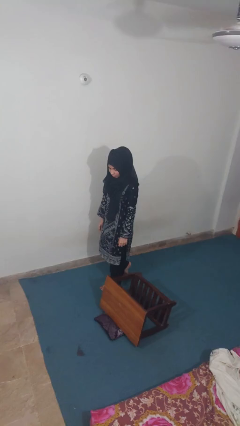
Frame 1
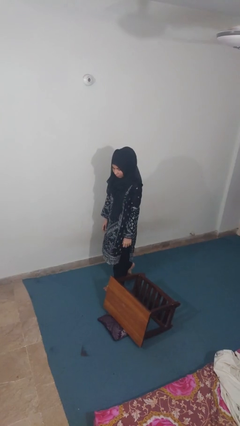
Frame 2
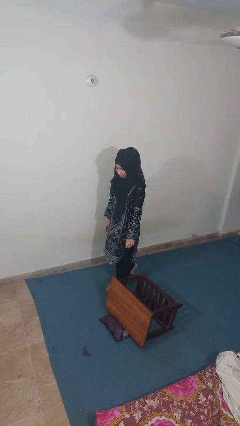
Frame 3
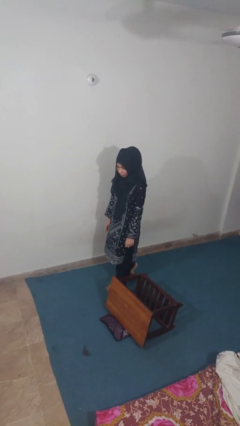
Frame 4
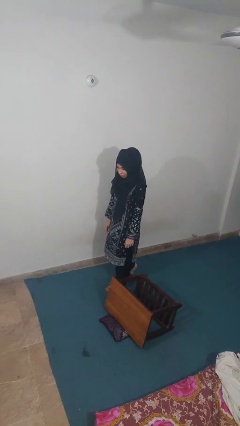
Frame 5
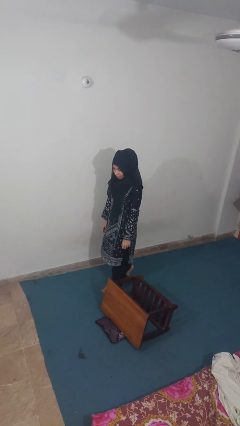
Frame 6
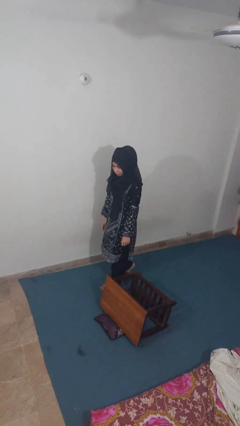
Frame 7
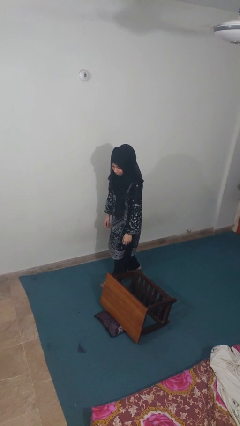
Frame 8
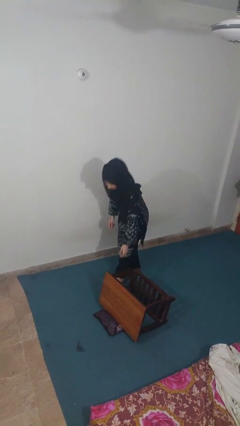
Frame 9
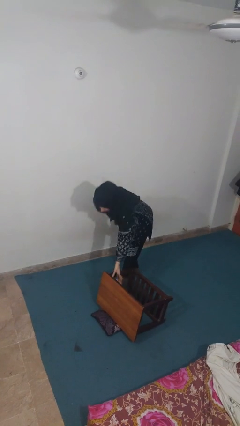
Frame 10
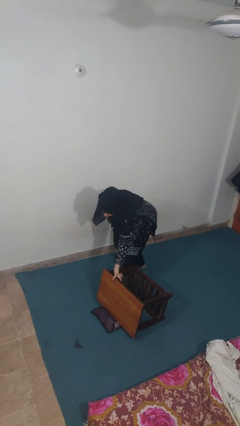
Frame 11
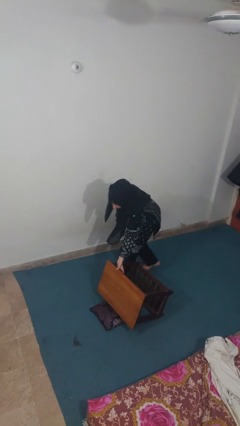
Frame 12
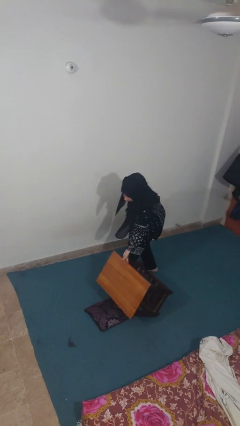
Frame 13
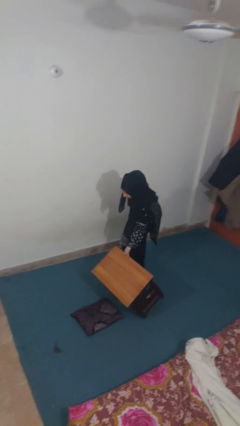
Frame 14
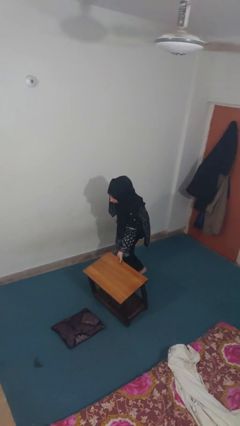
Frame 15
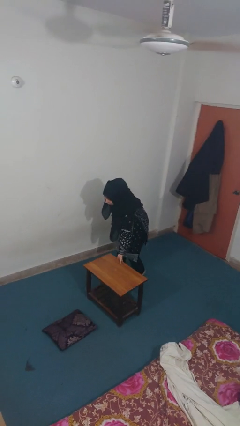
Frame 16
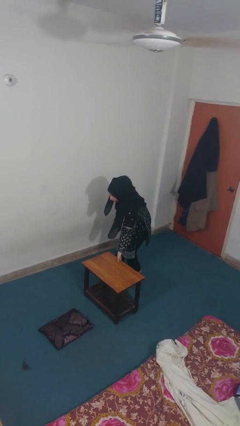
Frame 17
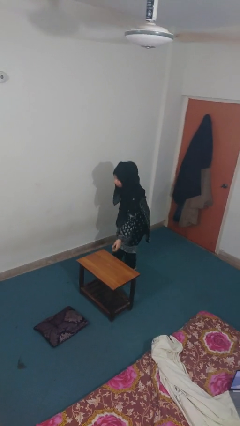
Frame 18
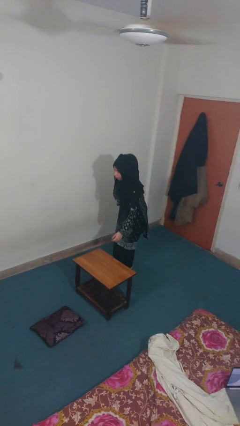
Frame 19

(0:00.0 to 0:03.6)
person sets upright furniture

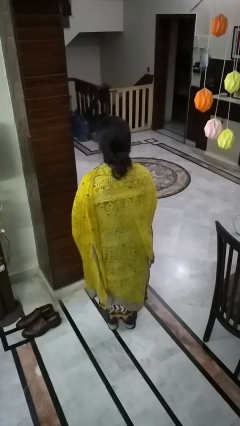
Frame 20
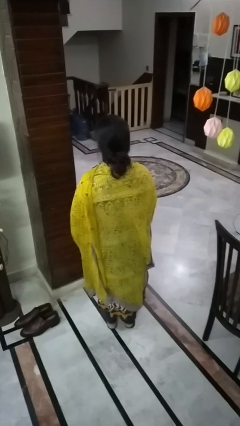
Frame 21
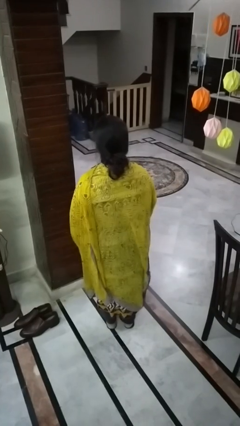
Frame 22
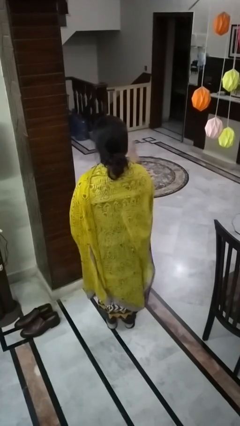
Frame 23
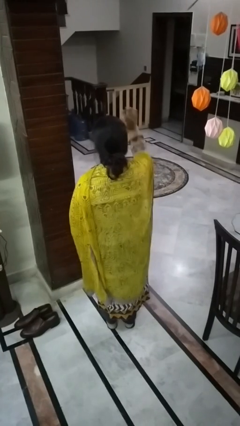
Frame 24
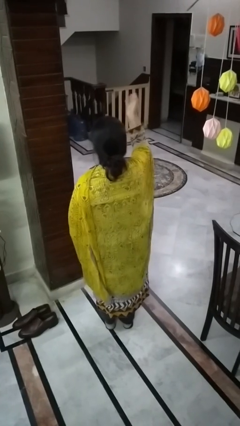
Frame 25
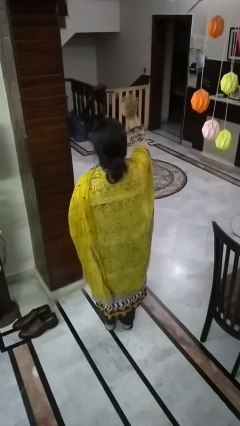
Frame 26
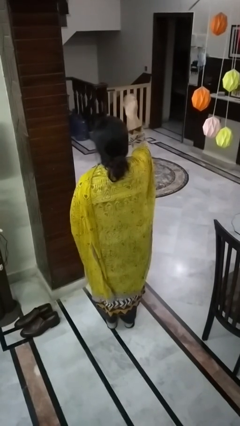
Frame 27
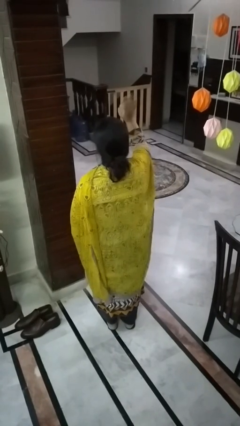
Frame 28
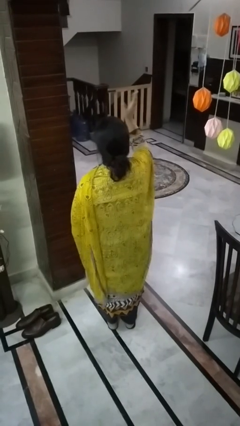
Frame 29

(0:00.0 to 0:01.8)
person waves at person

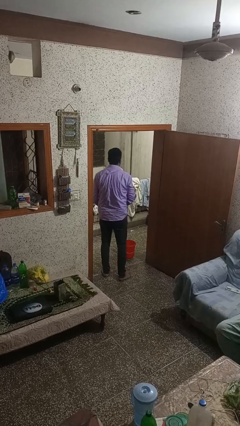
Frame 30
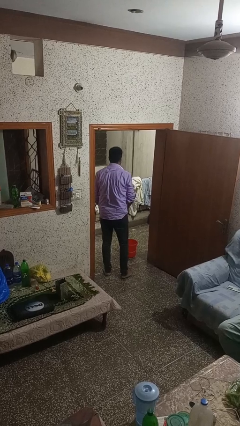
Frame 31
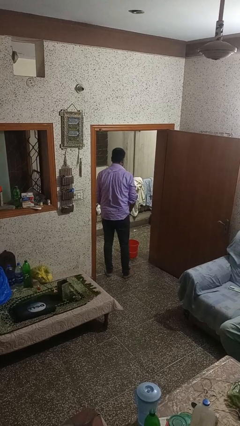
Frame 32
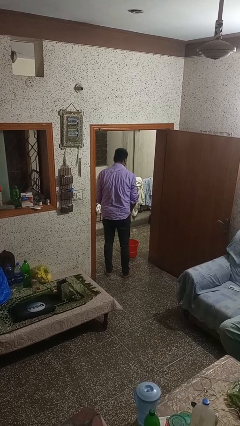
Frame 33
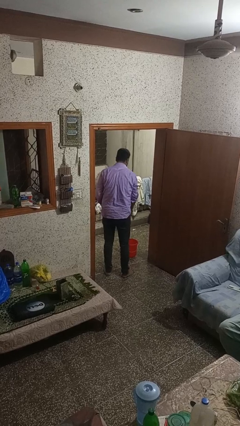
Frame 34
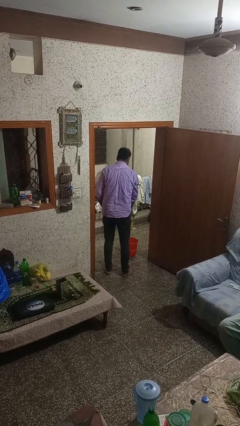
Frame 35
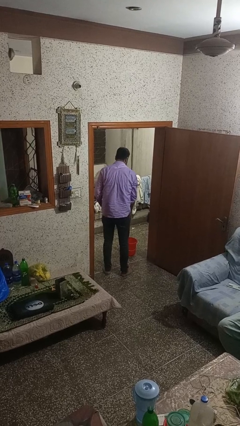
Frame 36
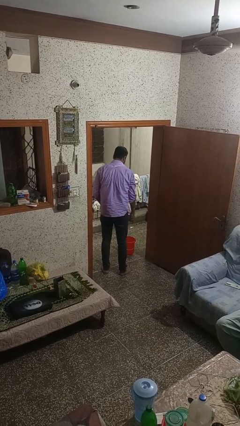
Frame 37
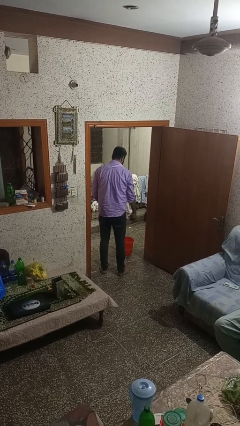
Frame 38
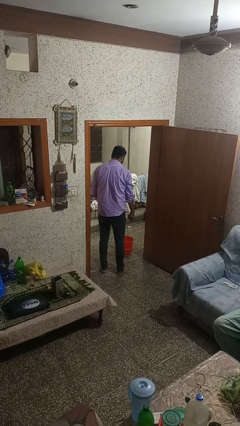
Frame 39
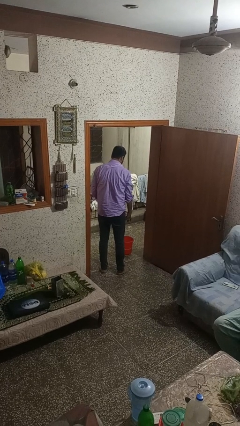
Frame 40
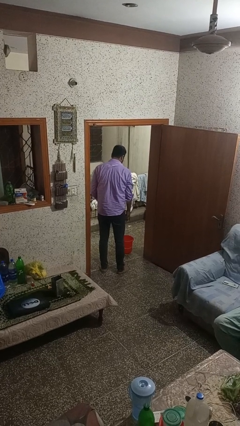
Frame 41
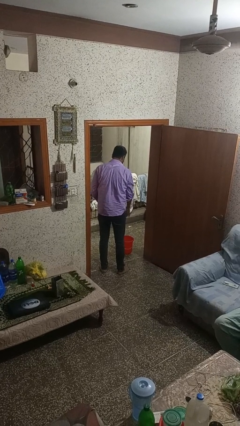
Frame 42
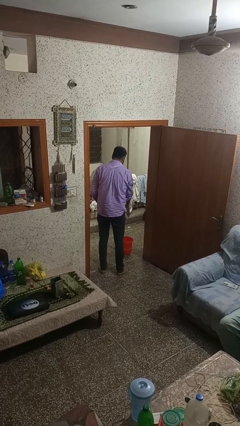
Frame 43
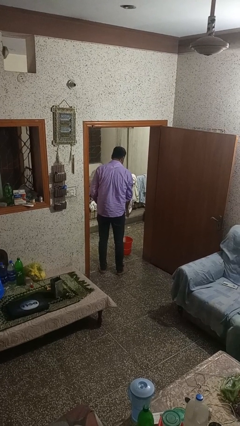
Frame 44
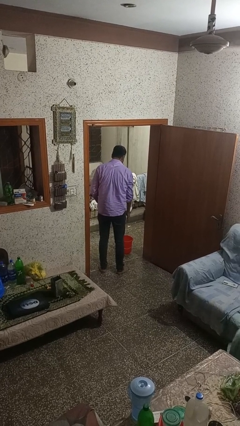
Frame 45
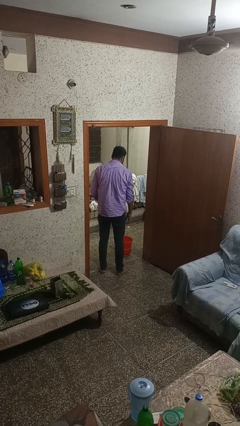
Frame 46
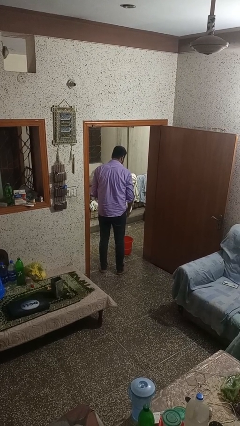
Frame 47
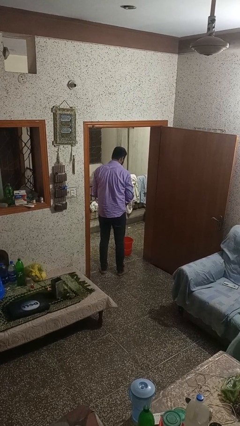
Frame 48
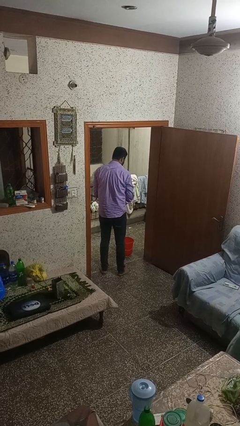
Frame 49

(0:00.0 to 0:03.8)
person discards trash

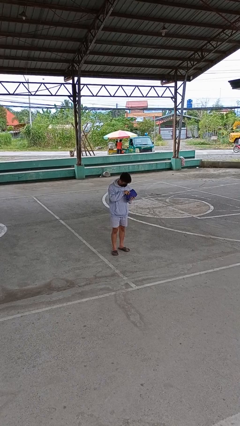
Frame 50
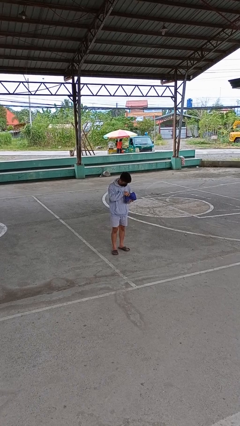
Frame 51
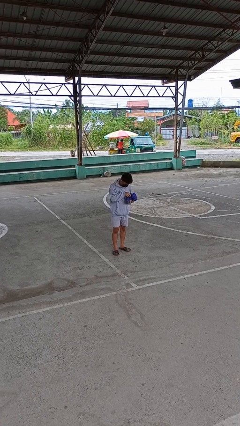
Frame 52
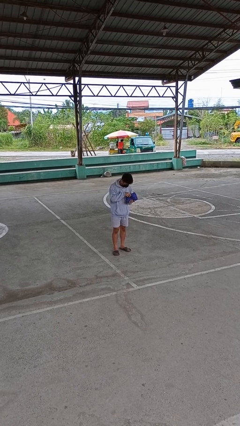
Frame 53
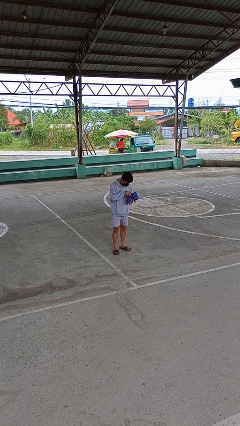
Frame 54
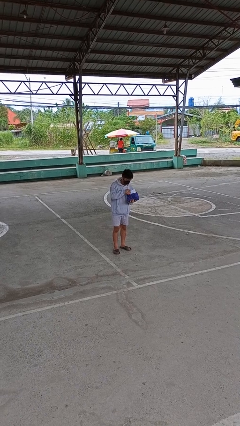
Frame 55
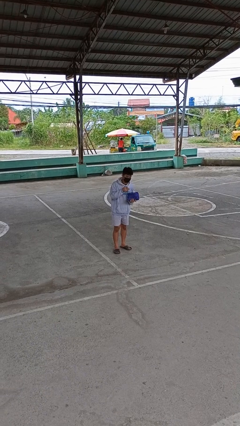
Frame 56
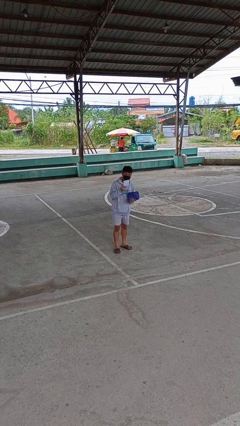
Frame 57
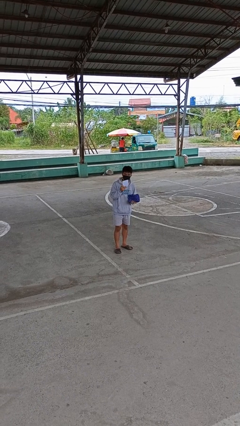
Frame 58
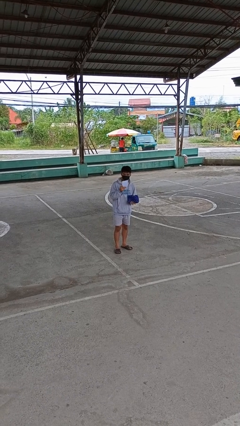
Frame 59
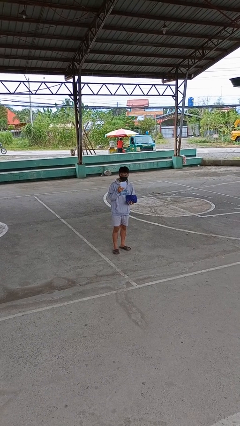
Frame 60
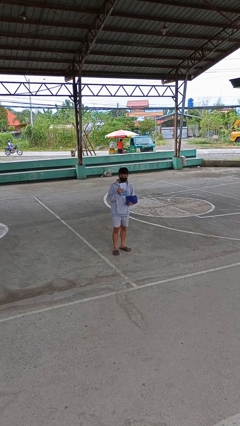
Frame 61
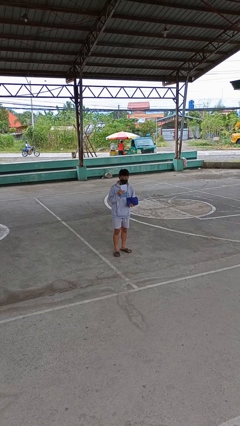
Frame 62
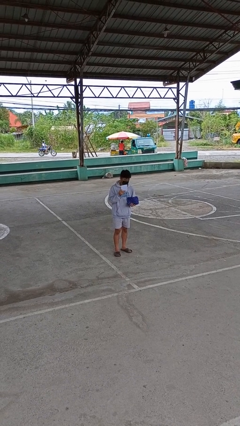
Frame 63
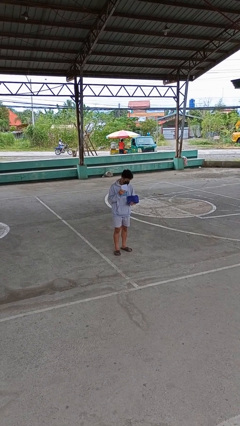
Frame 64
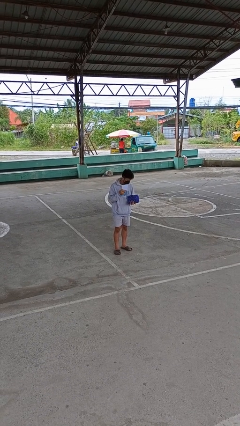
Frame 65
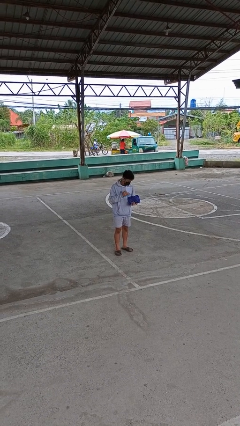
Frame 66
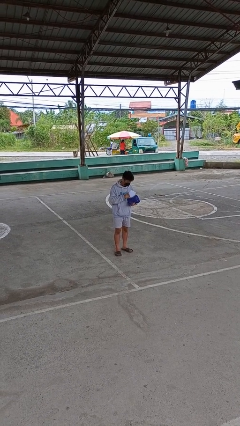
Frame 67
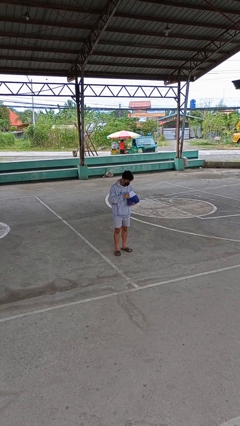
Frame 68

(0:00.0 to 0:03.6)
person takes object from purse

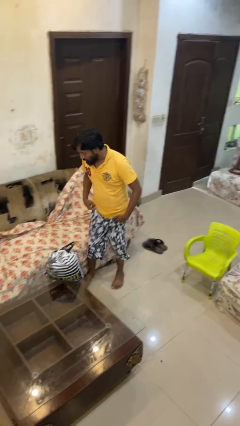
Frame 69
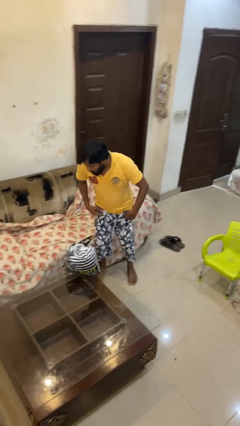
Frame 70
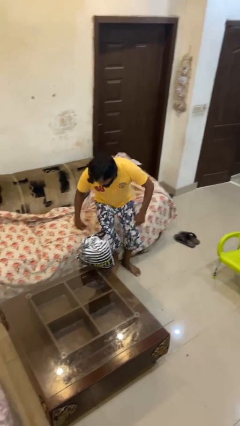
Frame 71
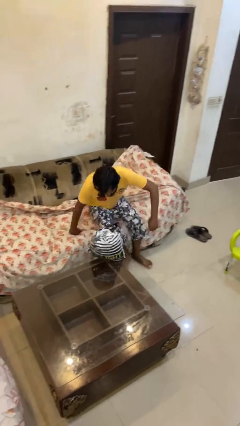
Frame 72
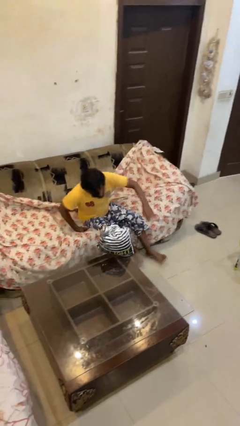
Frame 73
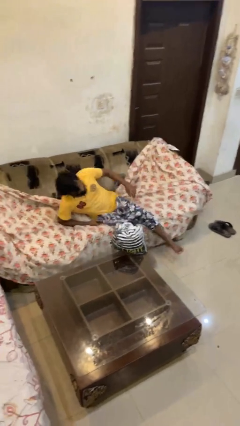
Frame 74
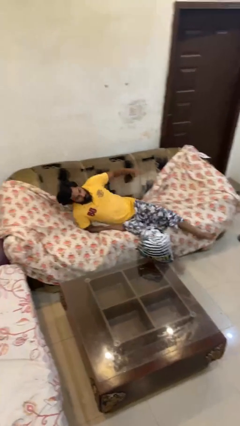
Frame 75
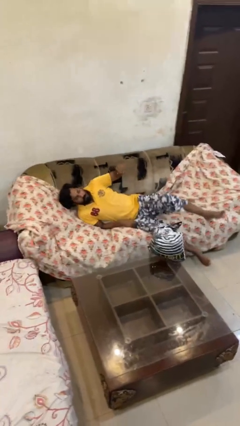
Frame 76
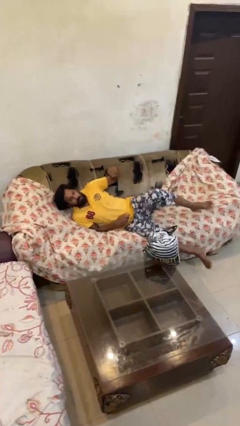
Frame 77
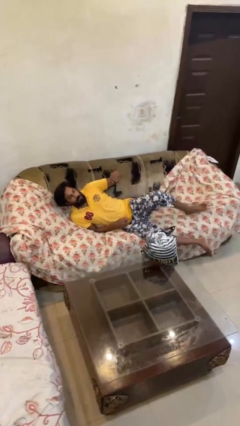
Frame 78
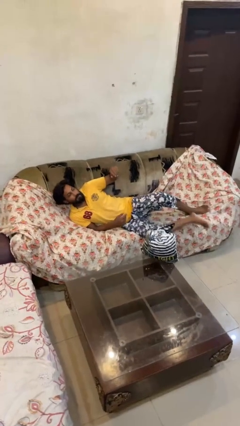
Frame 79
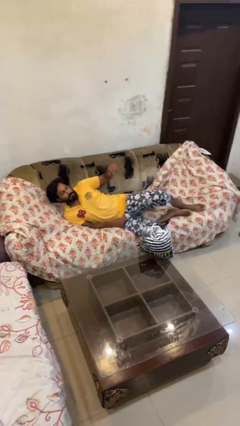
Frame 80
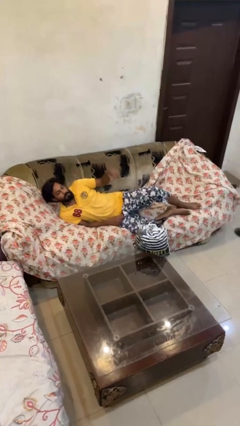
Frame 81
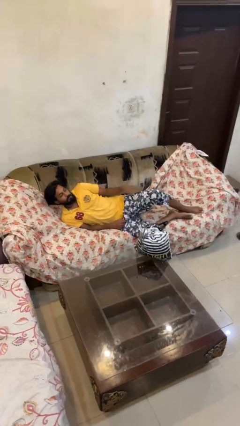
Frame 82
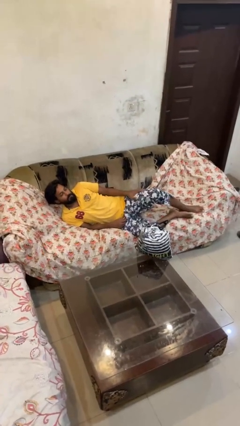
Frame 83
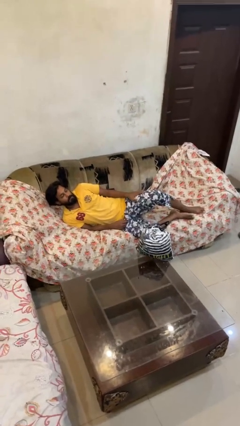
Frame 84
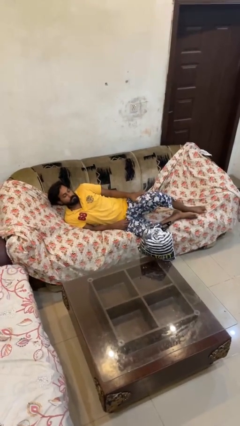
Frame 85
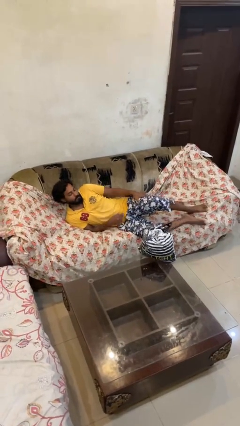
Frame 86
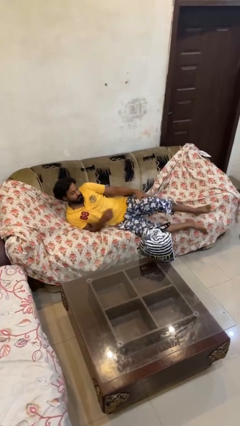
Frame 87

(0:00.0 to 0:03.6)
person lies down on couch

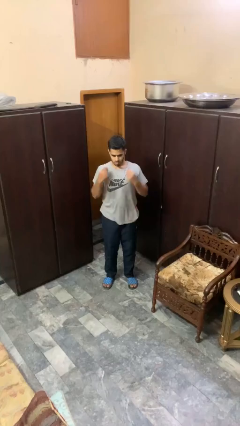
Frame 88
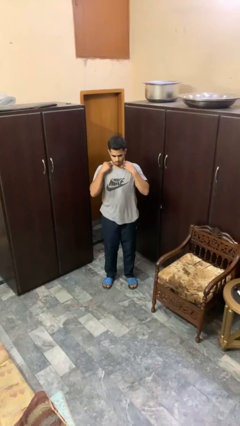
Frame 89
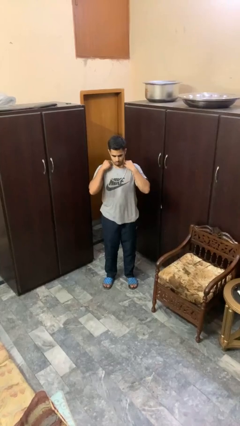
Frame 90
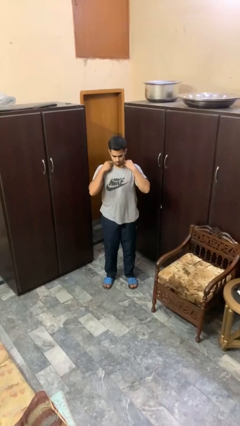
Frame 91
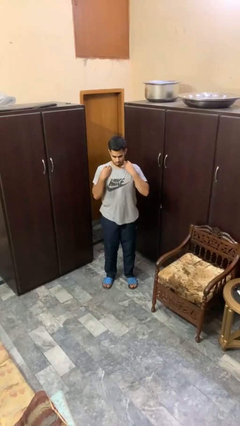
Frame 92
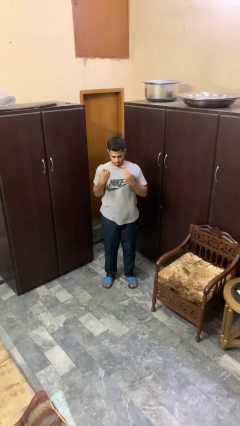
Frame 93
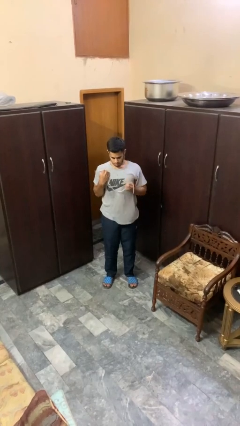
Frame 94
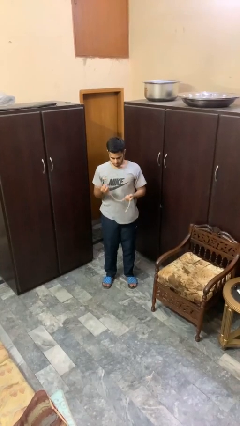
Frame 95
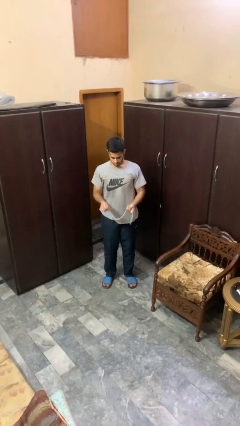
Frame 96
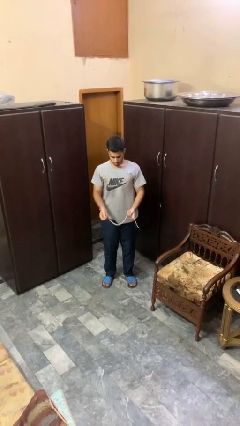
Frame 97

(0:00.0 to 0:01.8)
person takes off necklace
